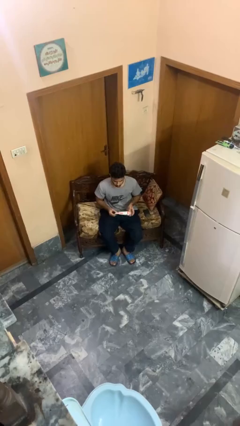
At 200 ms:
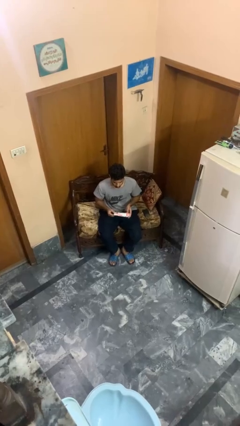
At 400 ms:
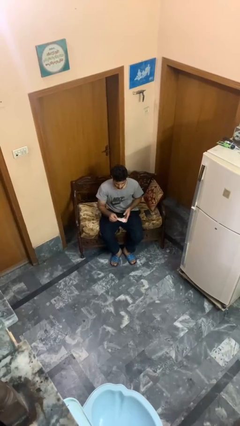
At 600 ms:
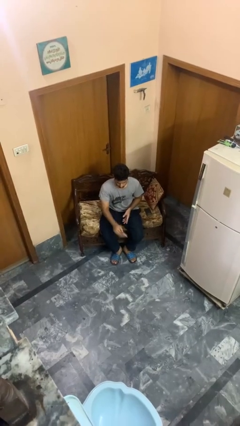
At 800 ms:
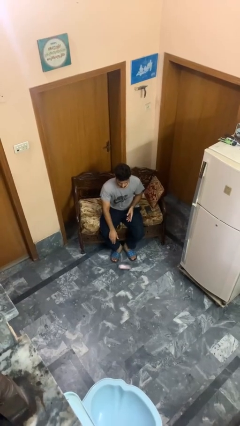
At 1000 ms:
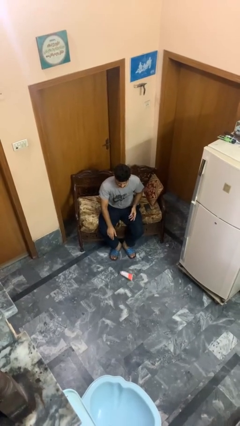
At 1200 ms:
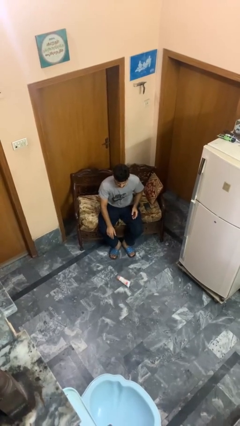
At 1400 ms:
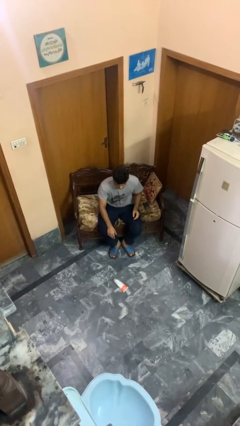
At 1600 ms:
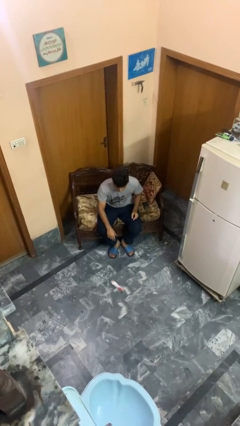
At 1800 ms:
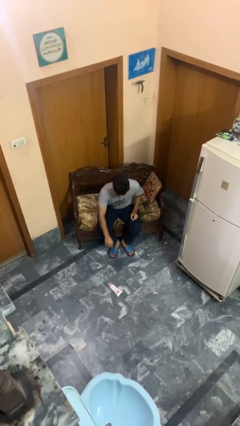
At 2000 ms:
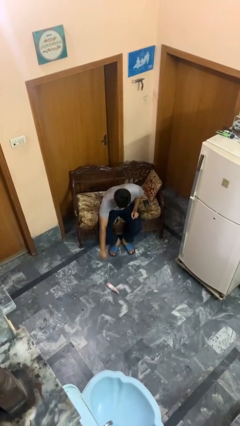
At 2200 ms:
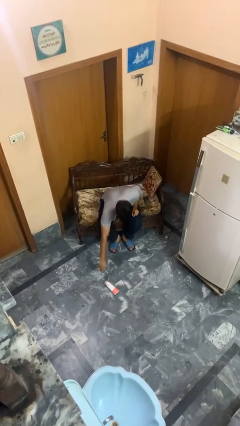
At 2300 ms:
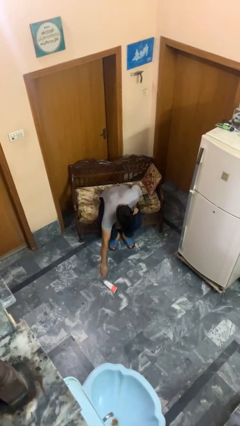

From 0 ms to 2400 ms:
person drops object

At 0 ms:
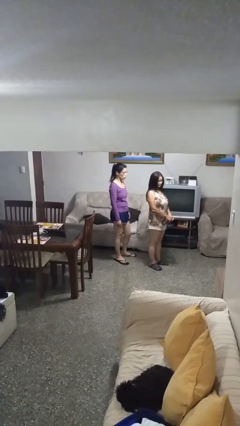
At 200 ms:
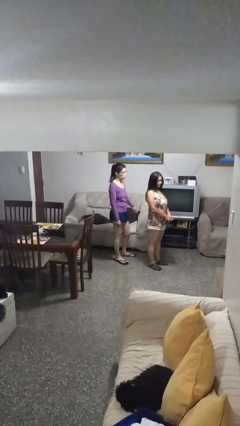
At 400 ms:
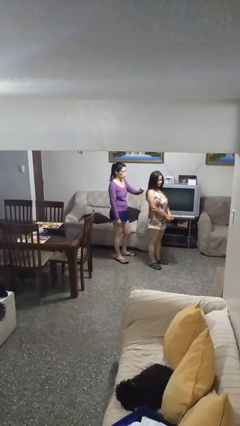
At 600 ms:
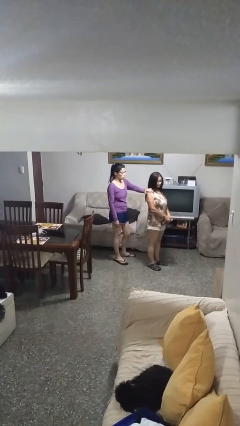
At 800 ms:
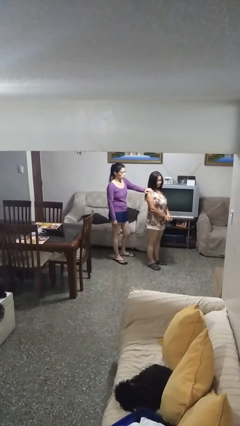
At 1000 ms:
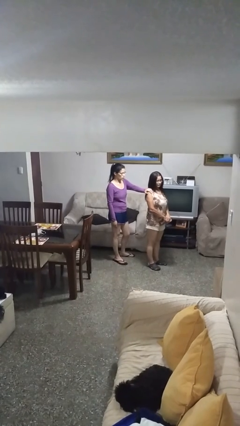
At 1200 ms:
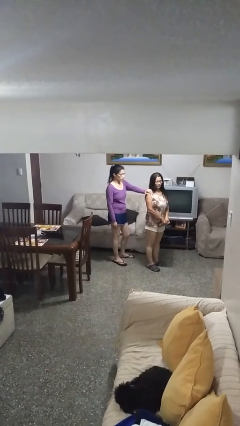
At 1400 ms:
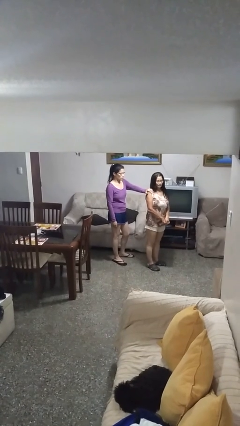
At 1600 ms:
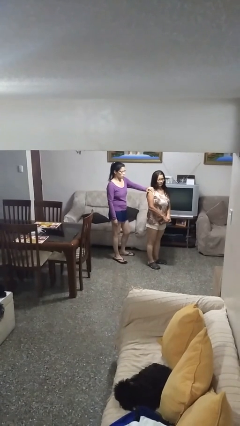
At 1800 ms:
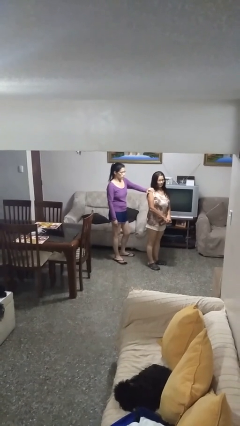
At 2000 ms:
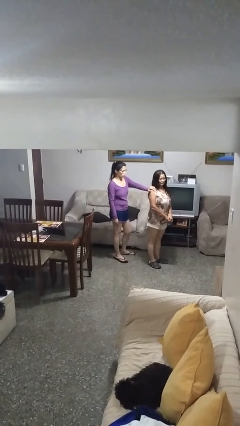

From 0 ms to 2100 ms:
person grabs person by shoulder

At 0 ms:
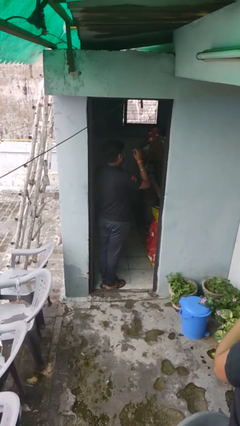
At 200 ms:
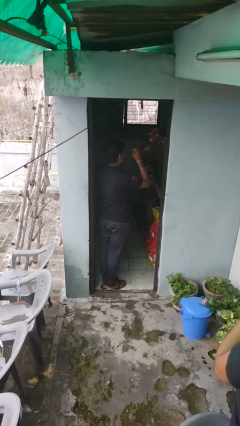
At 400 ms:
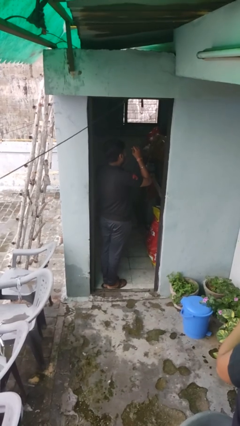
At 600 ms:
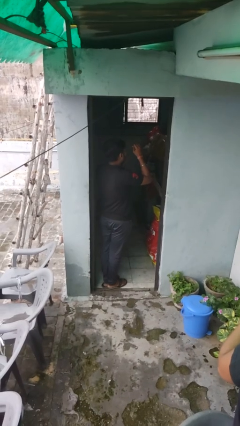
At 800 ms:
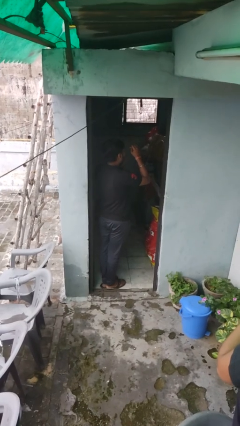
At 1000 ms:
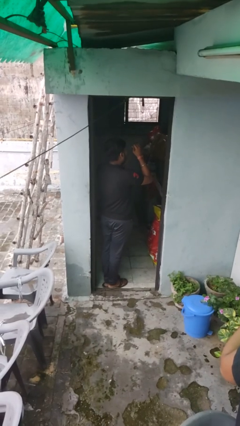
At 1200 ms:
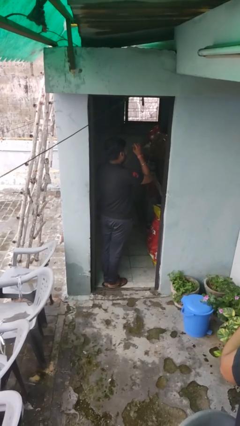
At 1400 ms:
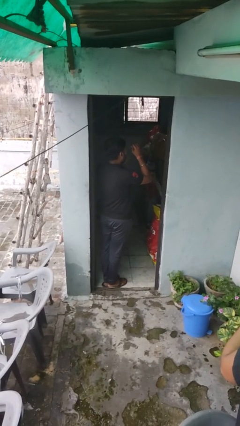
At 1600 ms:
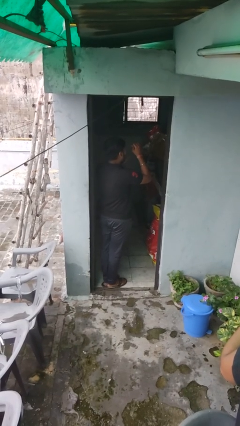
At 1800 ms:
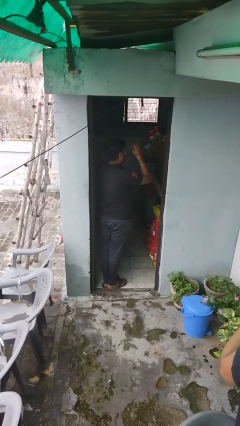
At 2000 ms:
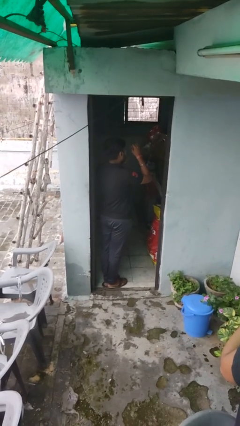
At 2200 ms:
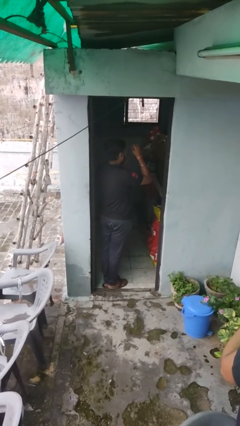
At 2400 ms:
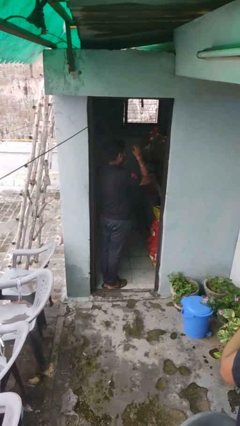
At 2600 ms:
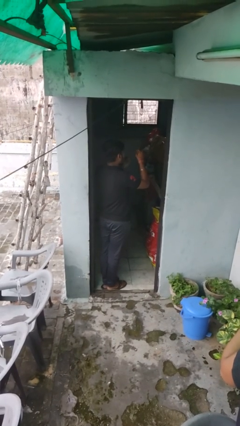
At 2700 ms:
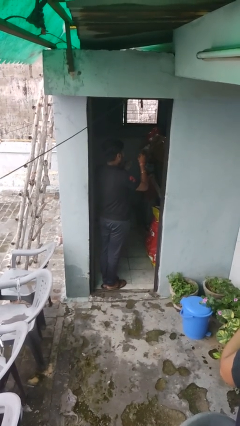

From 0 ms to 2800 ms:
person flosses

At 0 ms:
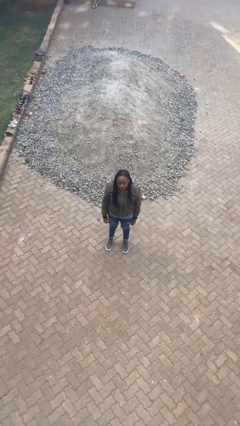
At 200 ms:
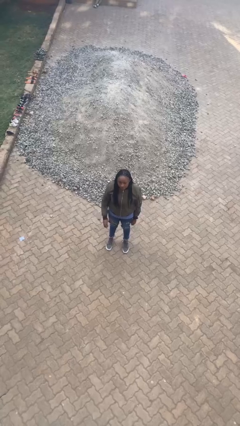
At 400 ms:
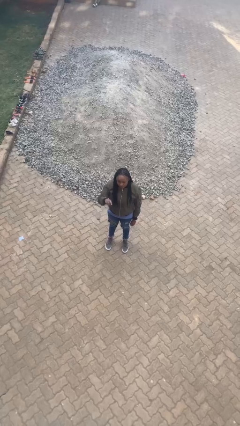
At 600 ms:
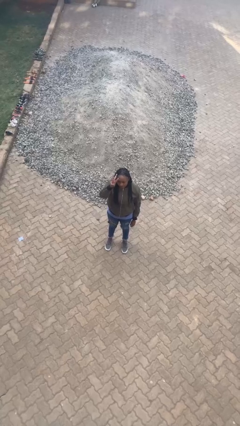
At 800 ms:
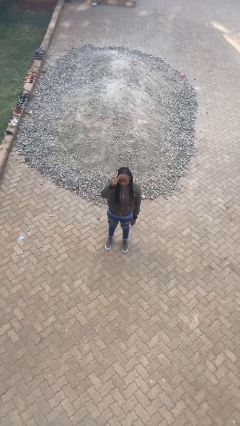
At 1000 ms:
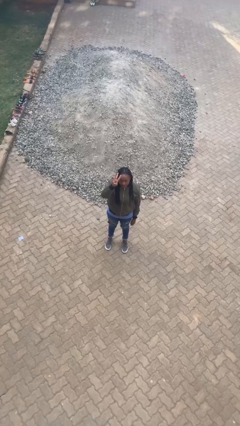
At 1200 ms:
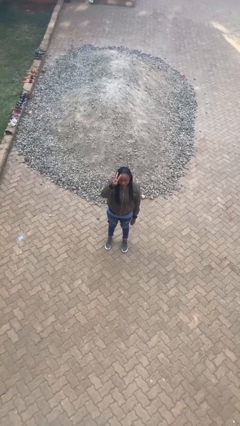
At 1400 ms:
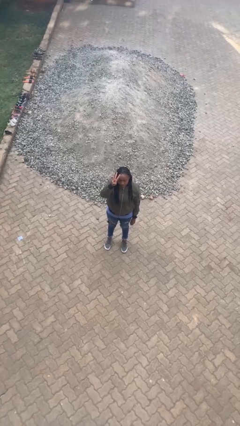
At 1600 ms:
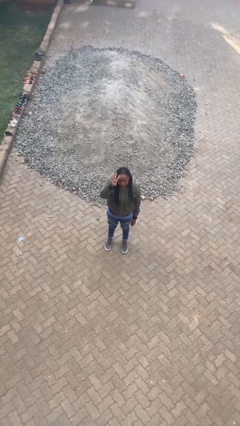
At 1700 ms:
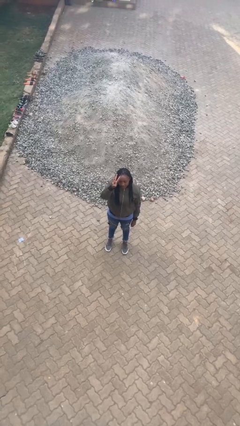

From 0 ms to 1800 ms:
person gestures number three

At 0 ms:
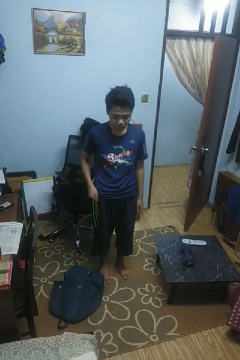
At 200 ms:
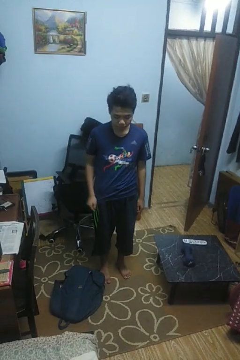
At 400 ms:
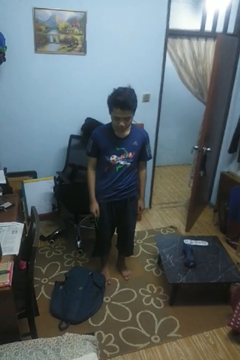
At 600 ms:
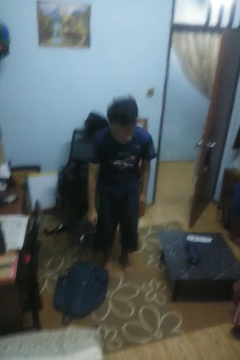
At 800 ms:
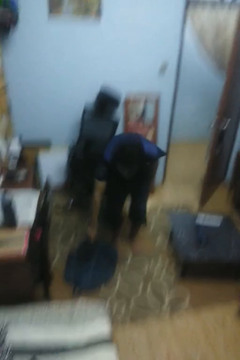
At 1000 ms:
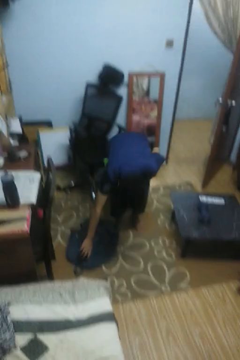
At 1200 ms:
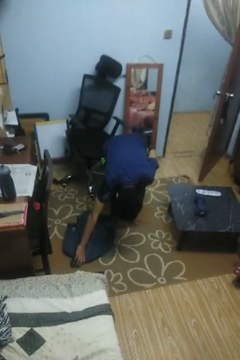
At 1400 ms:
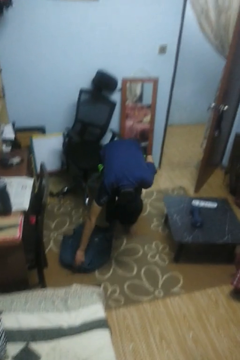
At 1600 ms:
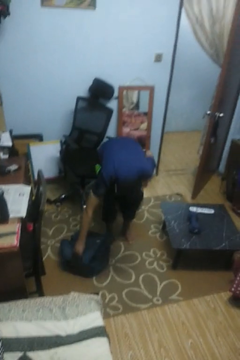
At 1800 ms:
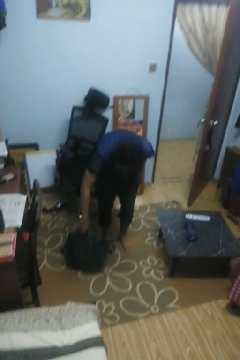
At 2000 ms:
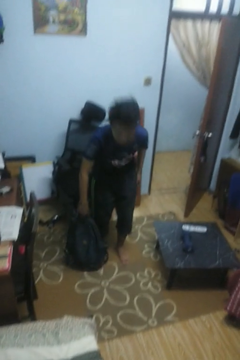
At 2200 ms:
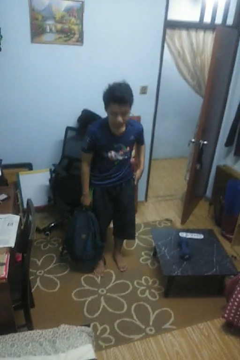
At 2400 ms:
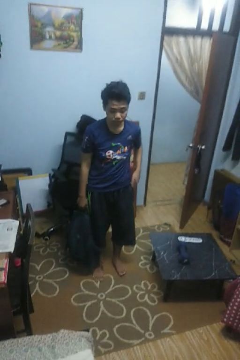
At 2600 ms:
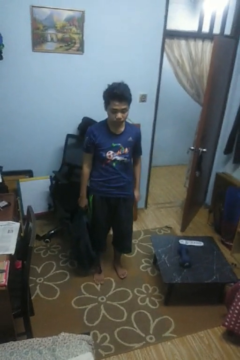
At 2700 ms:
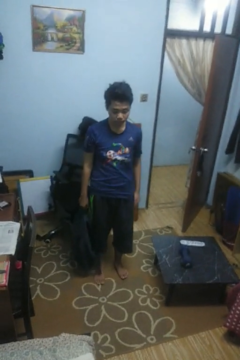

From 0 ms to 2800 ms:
person picks up object from floor

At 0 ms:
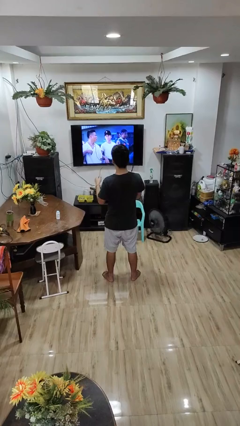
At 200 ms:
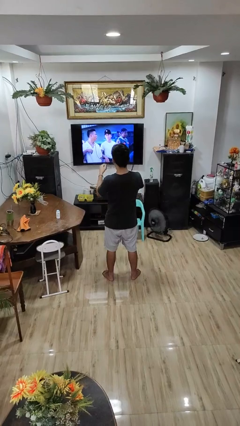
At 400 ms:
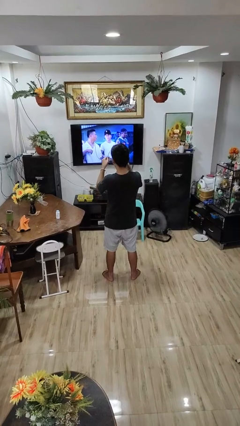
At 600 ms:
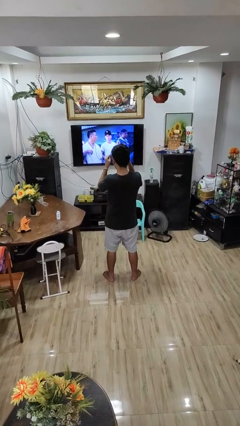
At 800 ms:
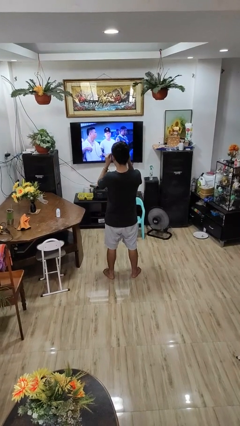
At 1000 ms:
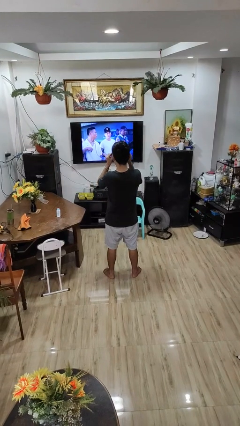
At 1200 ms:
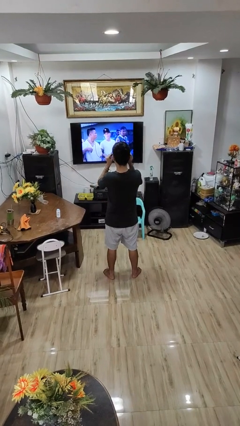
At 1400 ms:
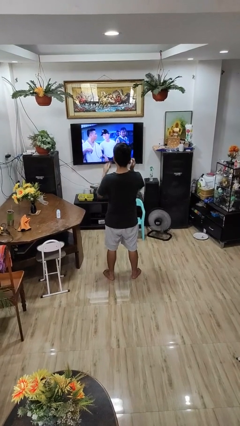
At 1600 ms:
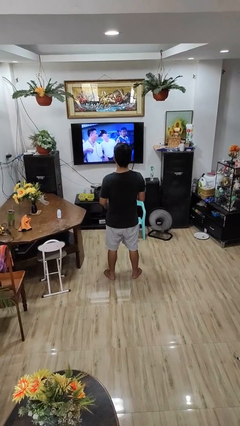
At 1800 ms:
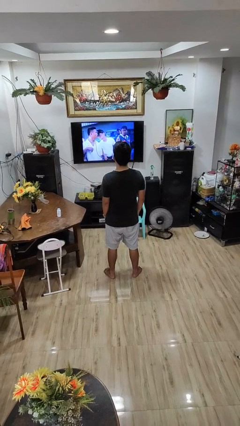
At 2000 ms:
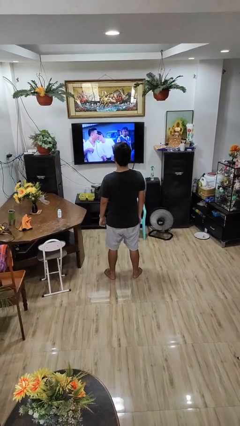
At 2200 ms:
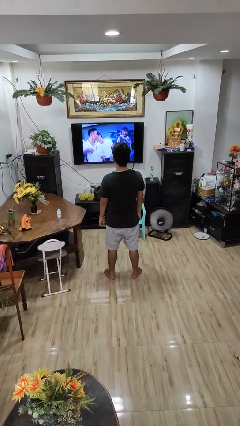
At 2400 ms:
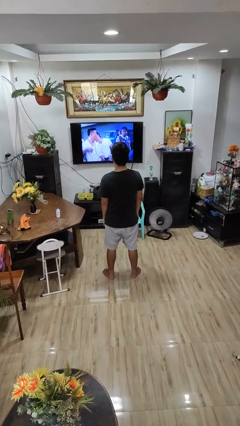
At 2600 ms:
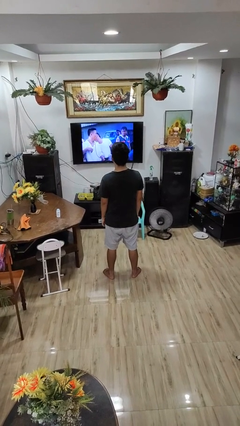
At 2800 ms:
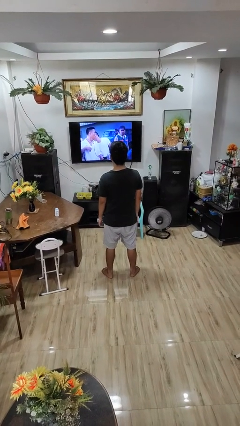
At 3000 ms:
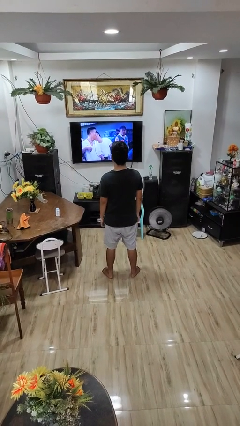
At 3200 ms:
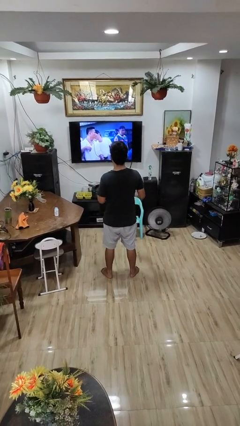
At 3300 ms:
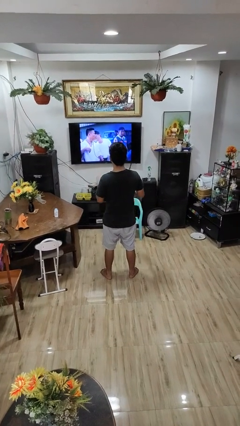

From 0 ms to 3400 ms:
person puts on glasses

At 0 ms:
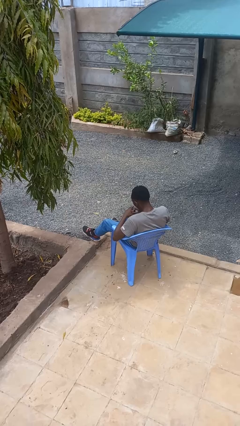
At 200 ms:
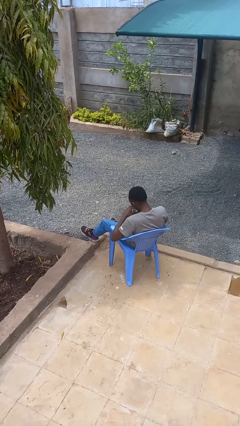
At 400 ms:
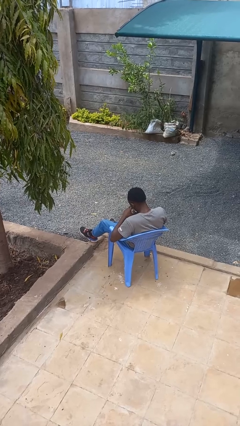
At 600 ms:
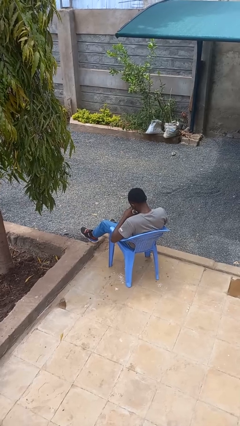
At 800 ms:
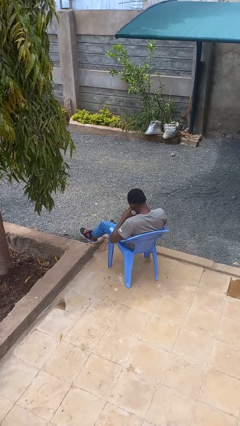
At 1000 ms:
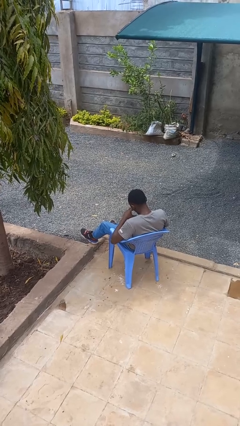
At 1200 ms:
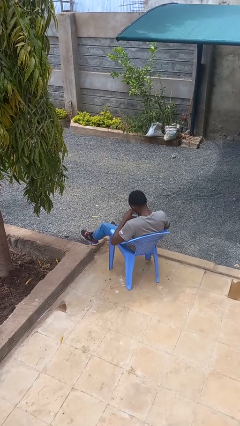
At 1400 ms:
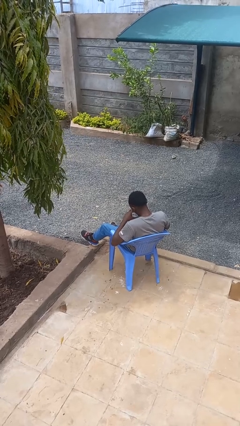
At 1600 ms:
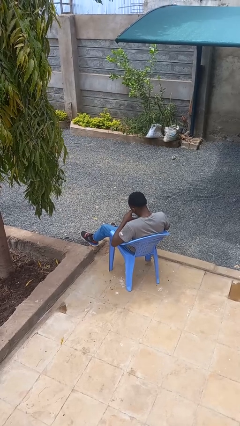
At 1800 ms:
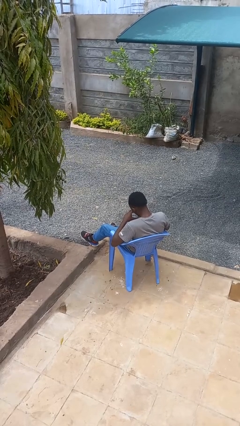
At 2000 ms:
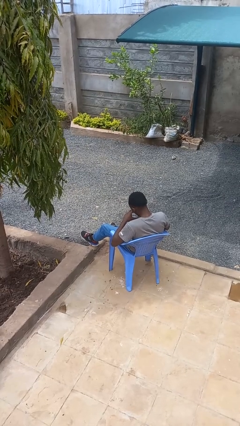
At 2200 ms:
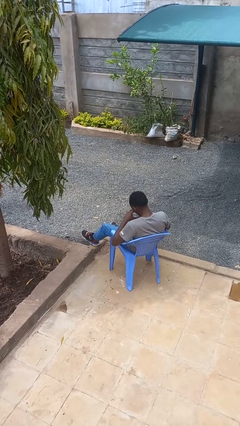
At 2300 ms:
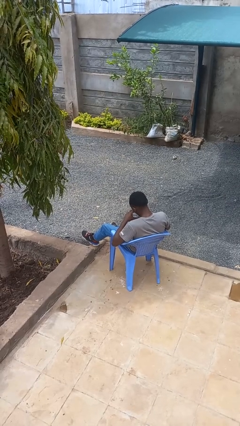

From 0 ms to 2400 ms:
person drinks from straw

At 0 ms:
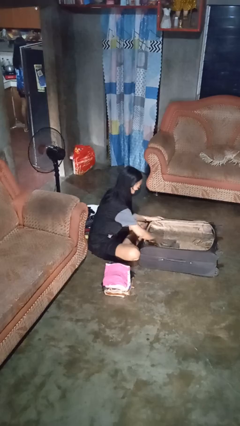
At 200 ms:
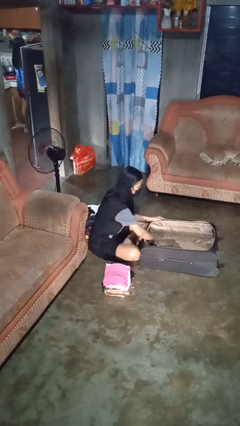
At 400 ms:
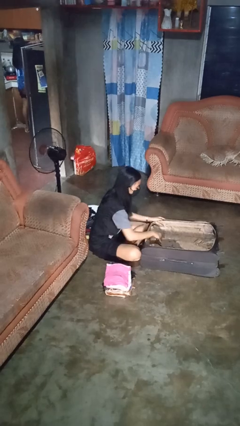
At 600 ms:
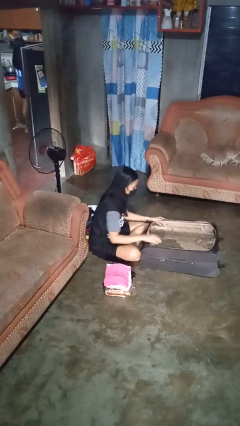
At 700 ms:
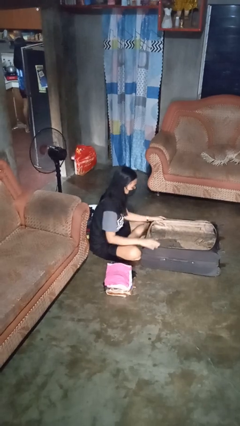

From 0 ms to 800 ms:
person loads clothes into suitcase
